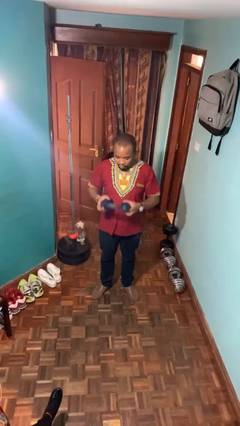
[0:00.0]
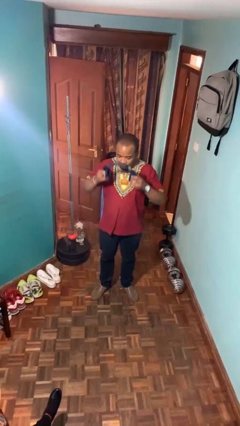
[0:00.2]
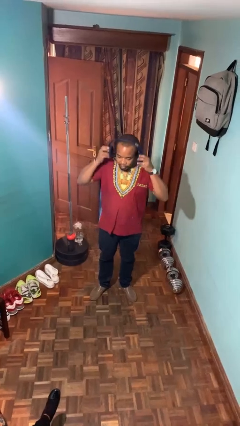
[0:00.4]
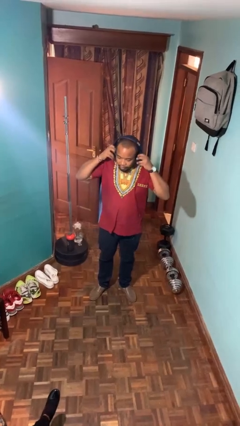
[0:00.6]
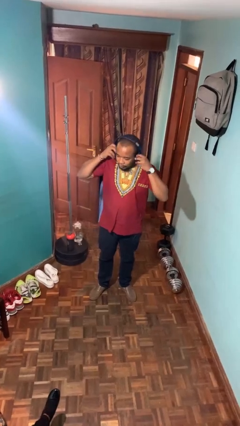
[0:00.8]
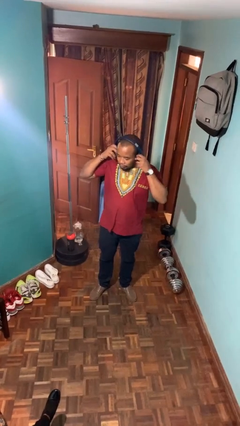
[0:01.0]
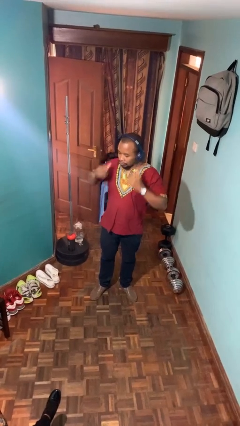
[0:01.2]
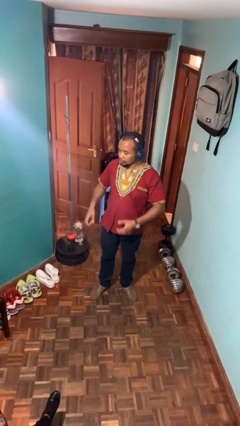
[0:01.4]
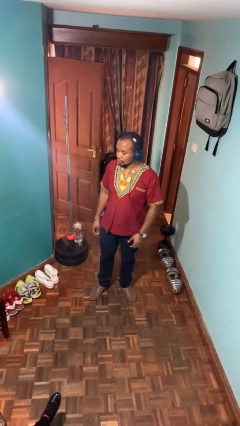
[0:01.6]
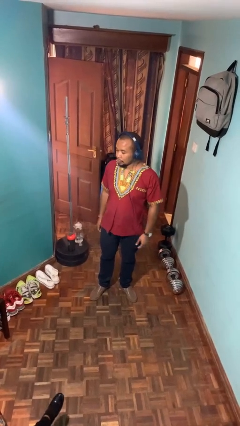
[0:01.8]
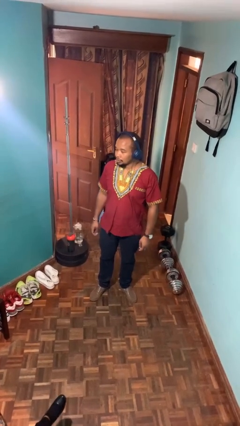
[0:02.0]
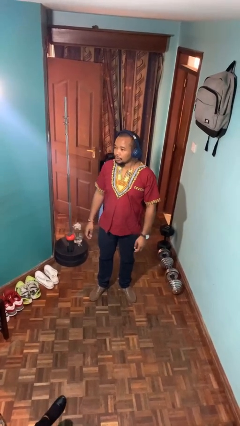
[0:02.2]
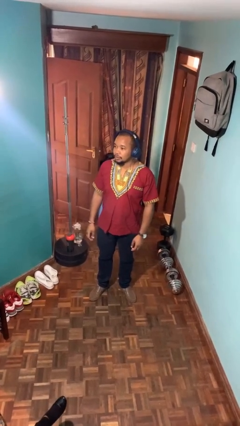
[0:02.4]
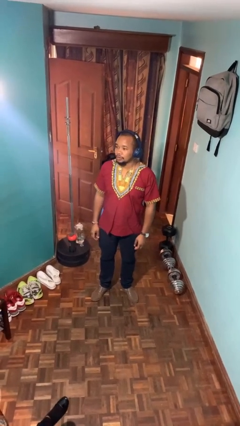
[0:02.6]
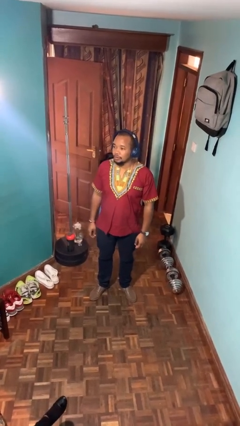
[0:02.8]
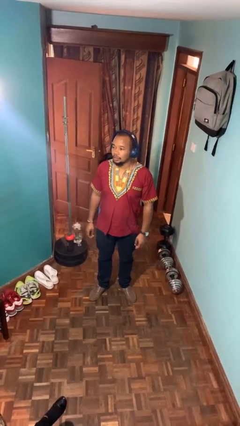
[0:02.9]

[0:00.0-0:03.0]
person puts on headphones

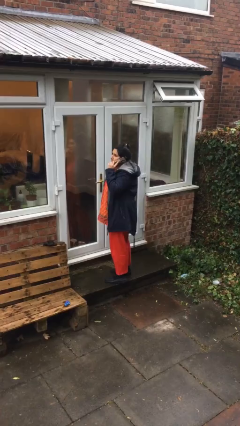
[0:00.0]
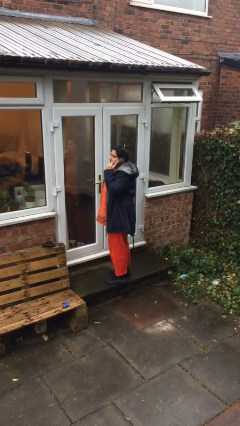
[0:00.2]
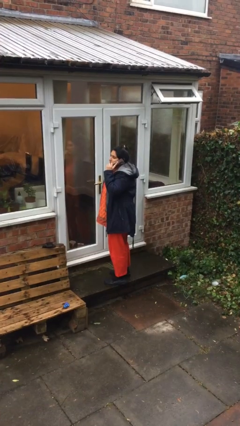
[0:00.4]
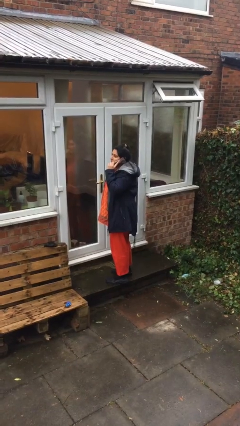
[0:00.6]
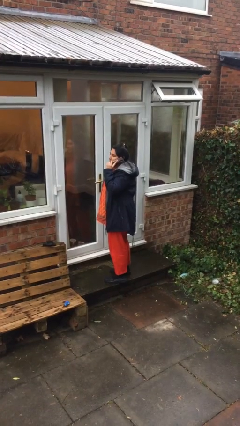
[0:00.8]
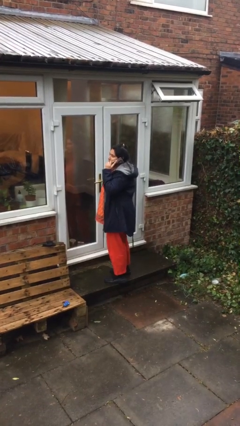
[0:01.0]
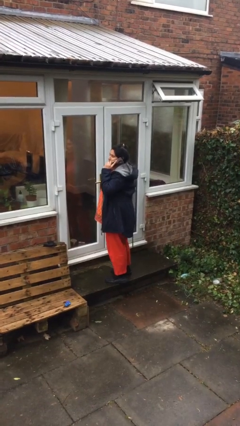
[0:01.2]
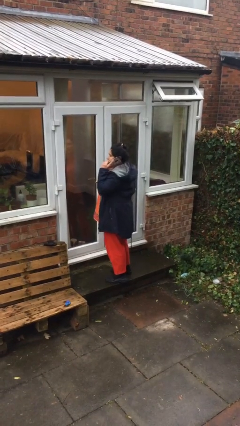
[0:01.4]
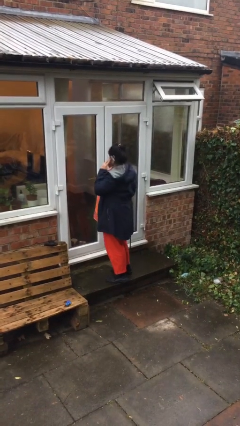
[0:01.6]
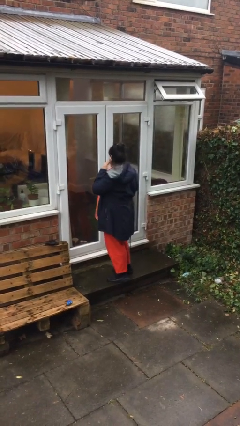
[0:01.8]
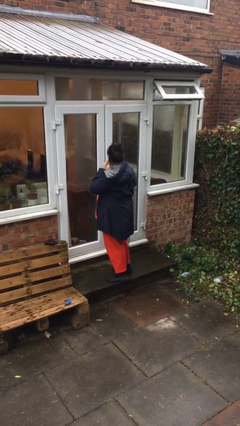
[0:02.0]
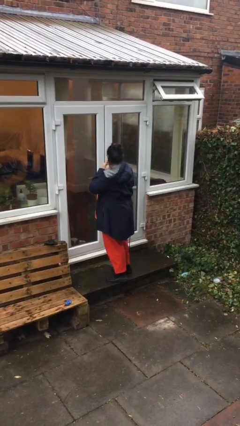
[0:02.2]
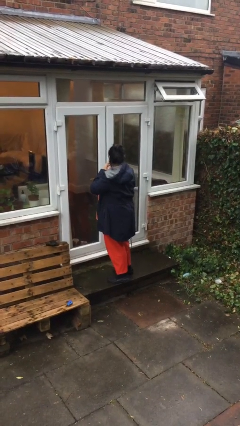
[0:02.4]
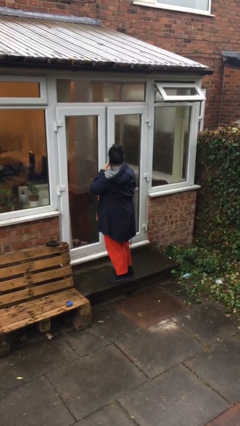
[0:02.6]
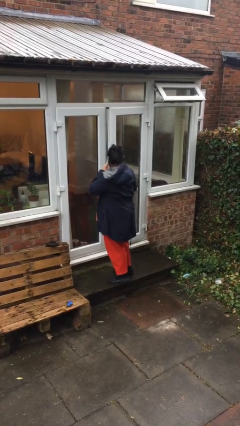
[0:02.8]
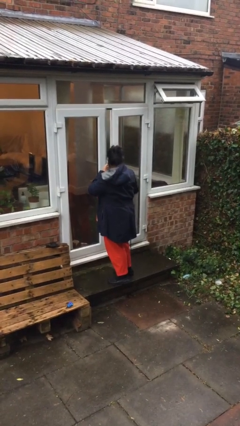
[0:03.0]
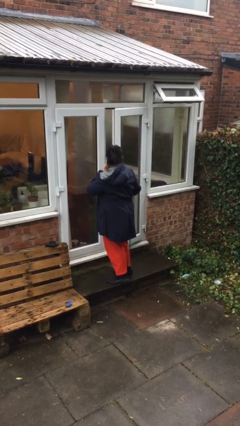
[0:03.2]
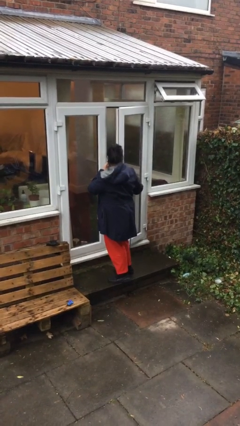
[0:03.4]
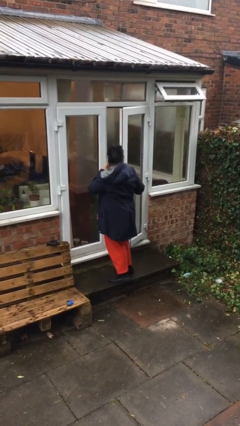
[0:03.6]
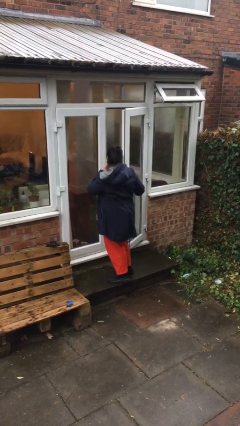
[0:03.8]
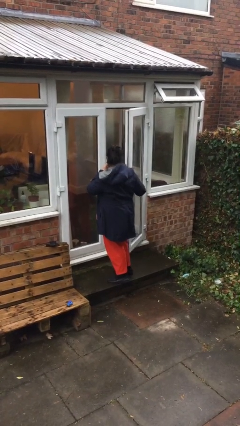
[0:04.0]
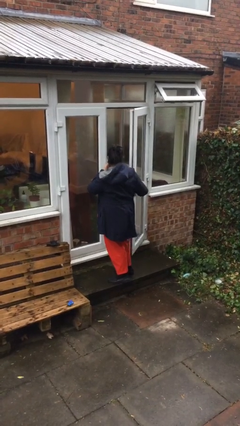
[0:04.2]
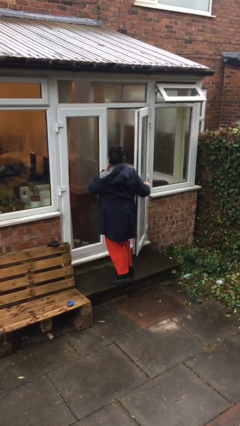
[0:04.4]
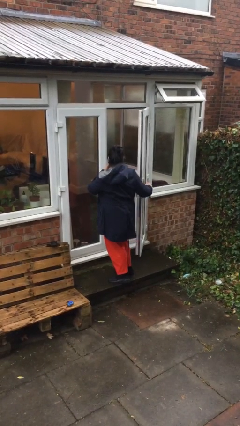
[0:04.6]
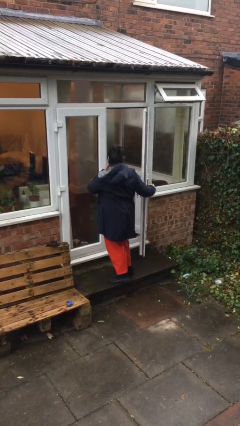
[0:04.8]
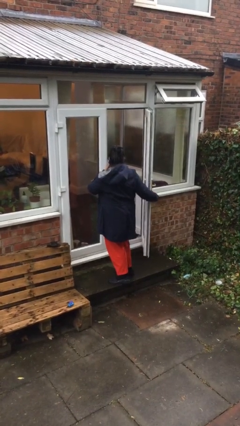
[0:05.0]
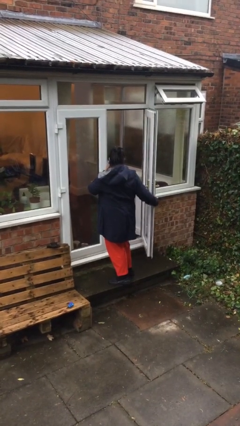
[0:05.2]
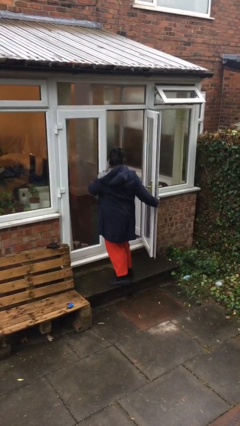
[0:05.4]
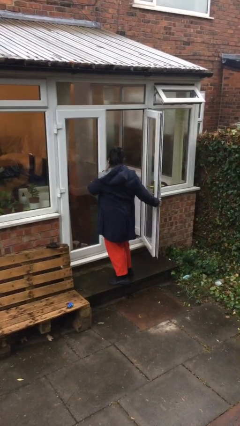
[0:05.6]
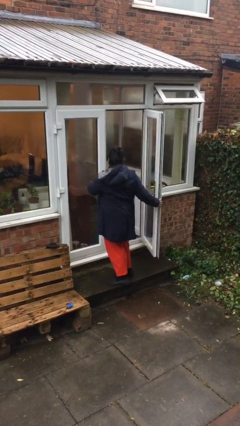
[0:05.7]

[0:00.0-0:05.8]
person opens facility door

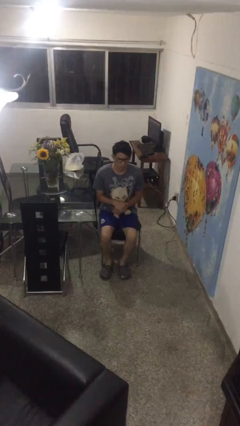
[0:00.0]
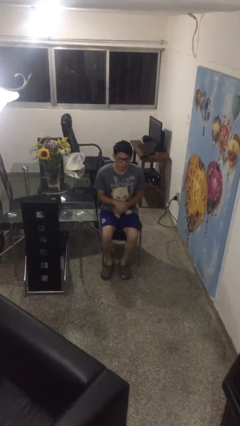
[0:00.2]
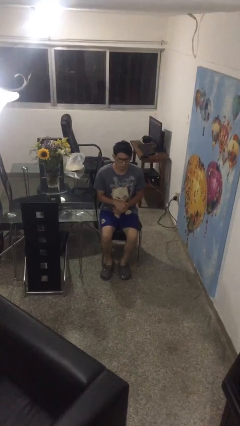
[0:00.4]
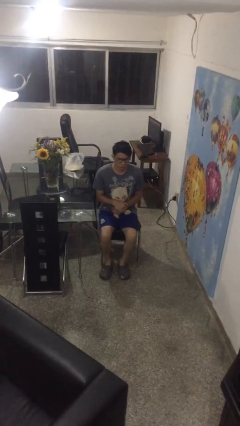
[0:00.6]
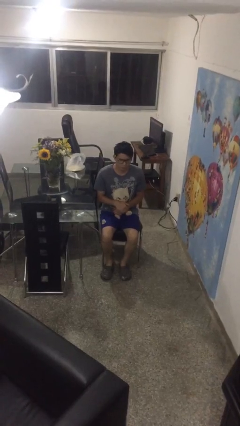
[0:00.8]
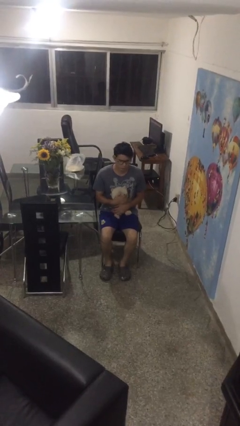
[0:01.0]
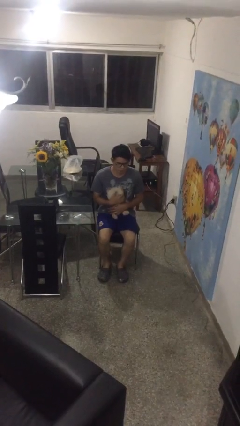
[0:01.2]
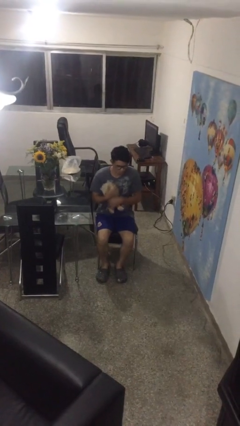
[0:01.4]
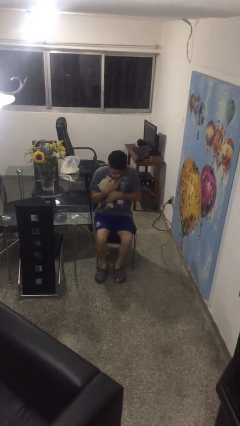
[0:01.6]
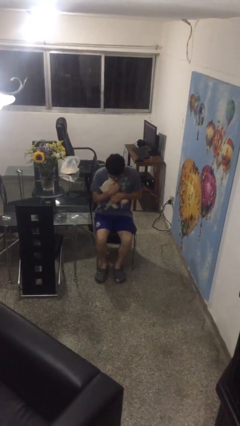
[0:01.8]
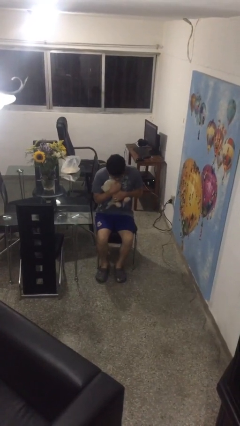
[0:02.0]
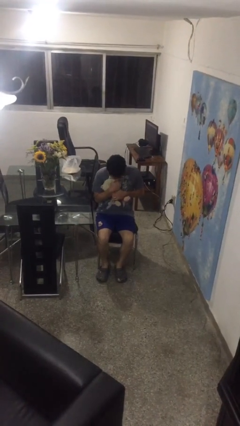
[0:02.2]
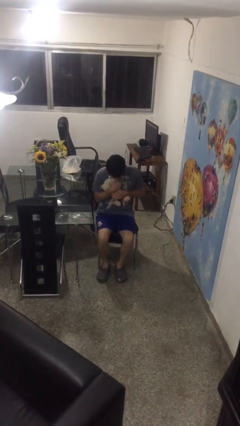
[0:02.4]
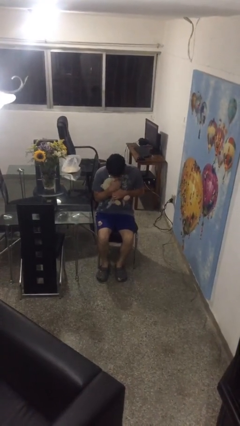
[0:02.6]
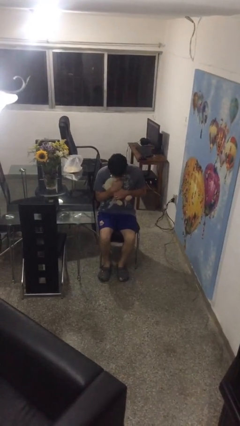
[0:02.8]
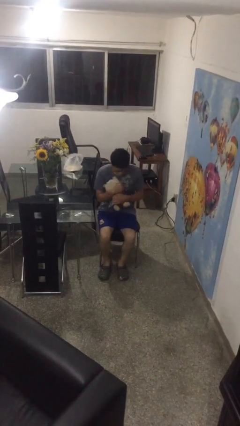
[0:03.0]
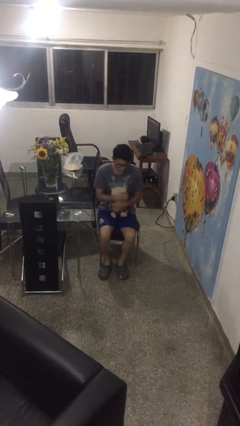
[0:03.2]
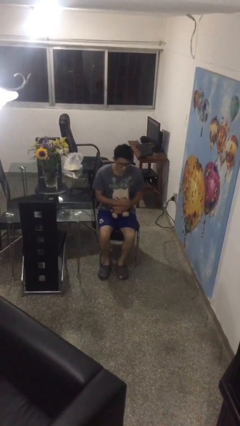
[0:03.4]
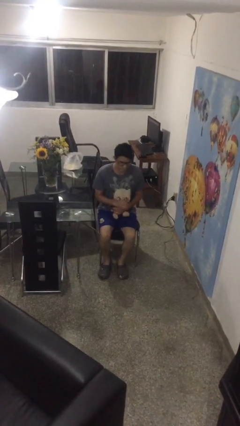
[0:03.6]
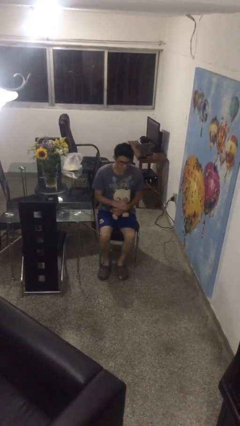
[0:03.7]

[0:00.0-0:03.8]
person hugs stuffed animal

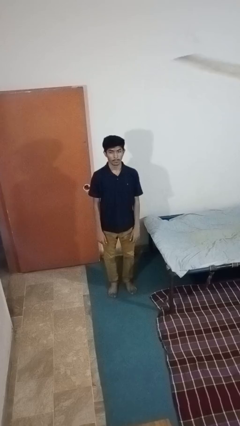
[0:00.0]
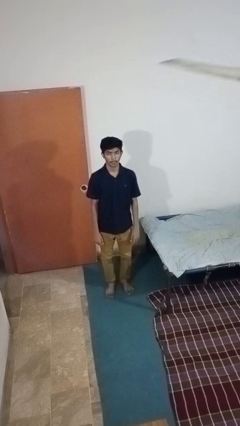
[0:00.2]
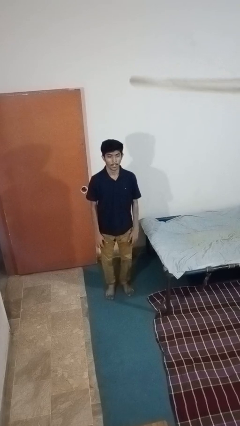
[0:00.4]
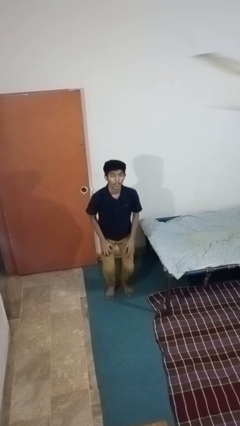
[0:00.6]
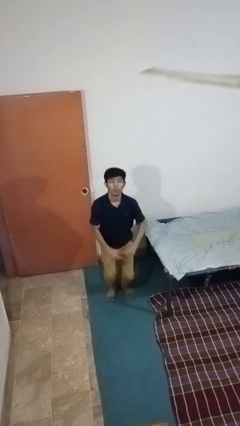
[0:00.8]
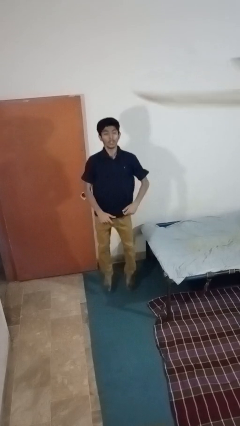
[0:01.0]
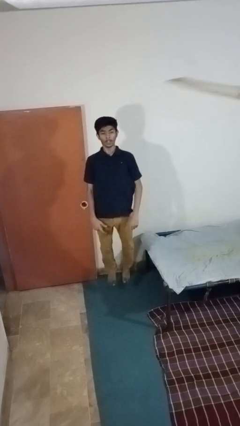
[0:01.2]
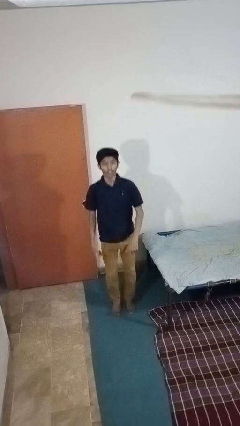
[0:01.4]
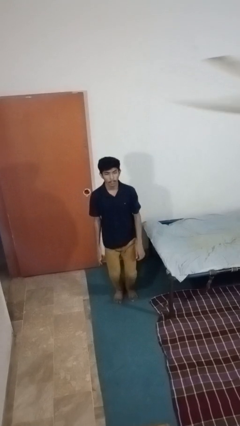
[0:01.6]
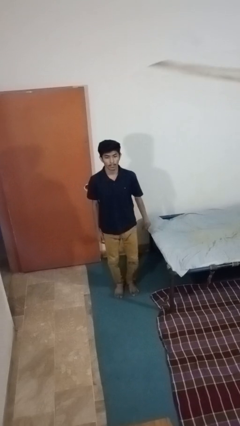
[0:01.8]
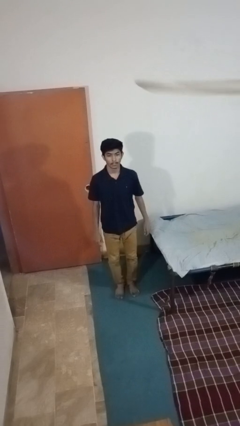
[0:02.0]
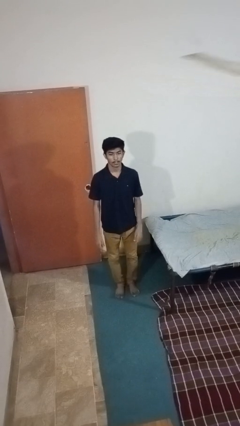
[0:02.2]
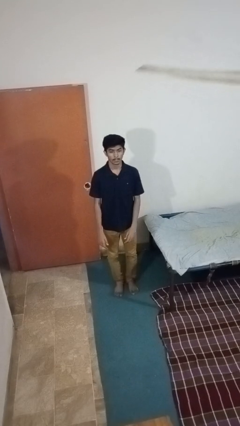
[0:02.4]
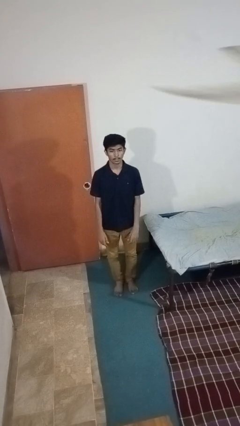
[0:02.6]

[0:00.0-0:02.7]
person jumps

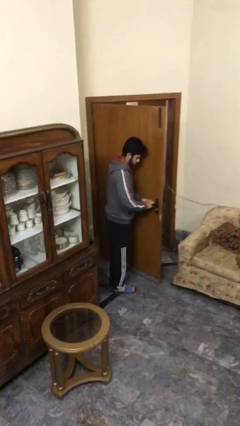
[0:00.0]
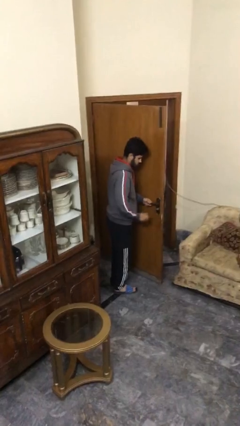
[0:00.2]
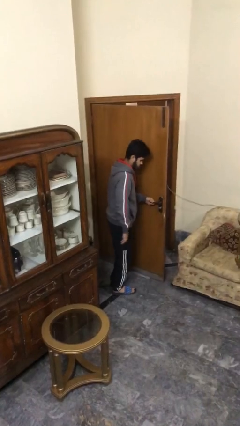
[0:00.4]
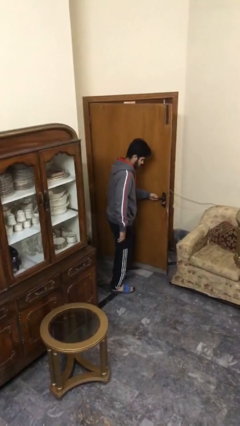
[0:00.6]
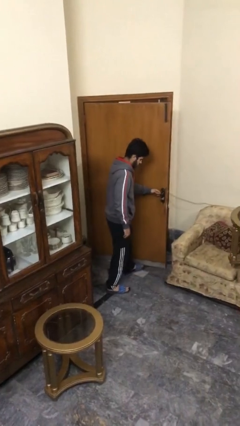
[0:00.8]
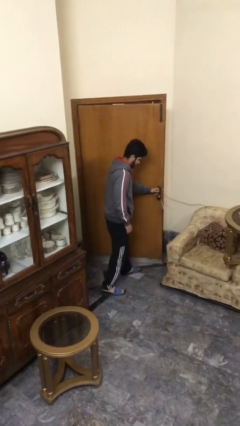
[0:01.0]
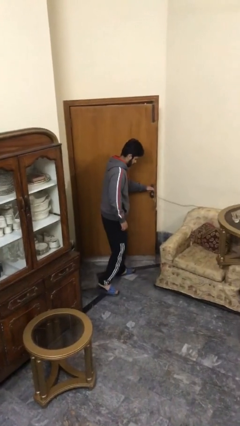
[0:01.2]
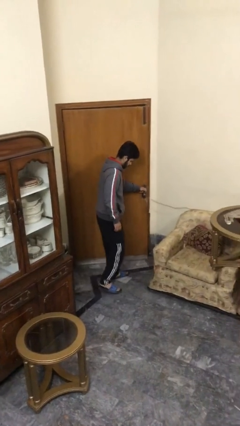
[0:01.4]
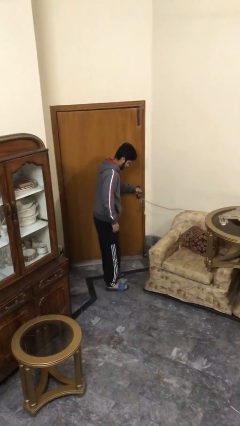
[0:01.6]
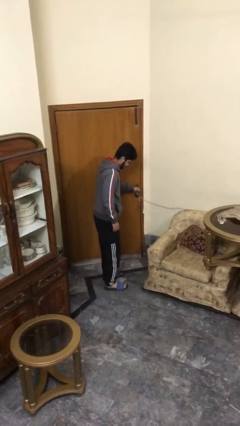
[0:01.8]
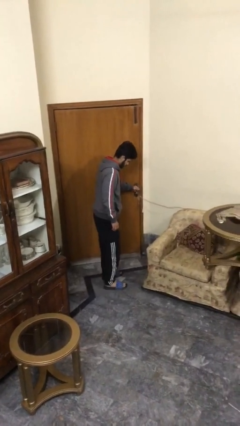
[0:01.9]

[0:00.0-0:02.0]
person closes facility door

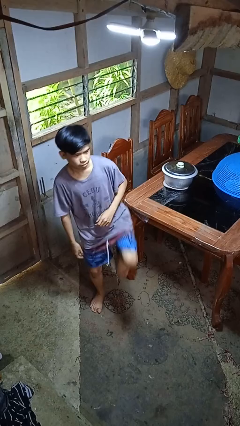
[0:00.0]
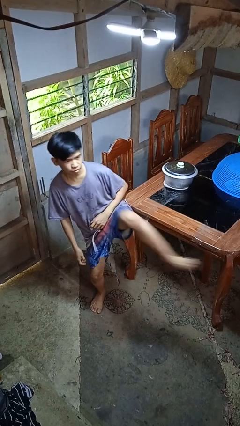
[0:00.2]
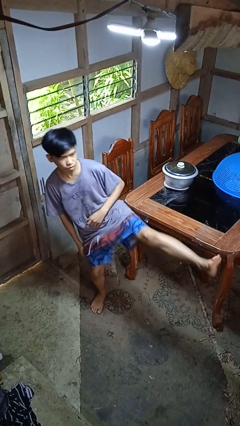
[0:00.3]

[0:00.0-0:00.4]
person karate kicks
